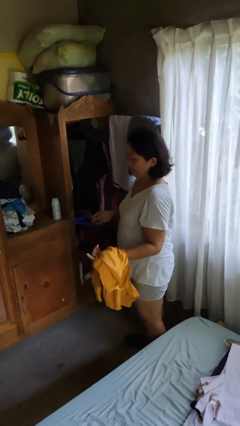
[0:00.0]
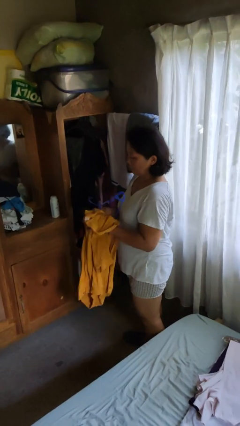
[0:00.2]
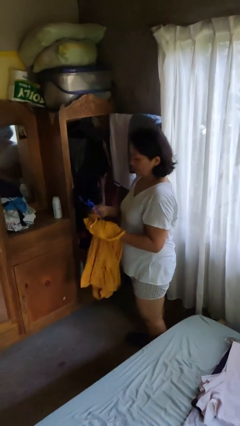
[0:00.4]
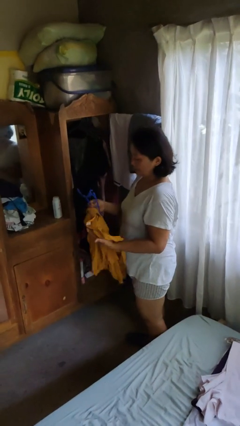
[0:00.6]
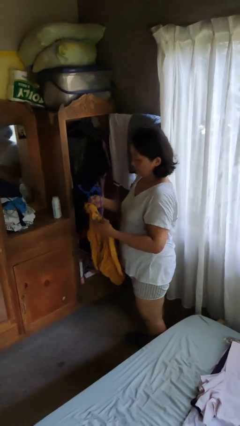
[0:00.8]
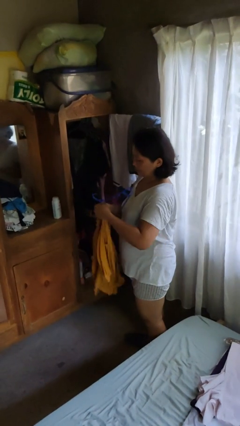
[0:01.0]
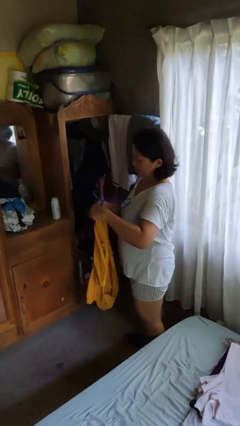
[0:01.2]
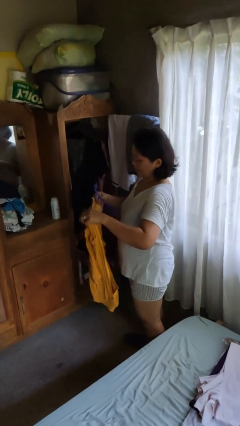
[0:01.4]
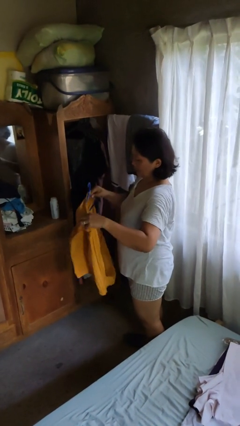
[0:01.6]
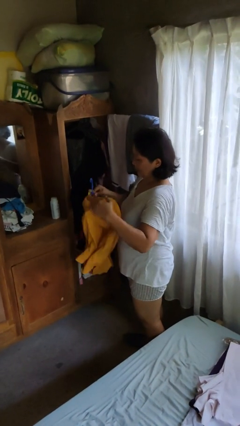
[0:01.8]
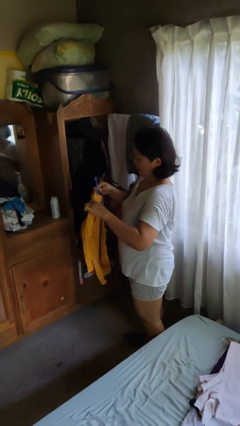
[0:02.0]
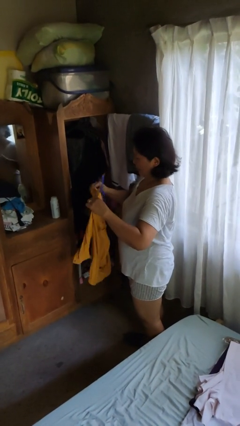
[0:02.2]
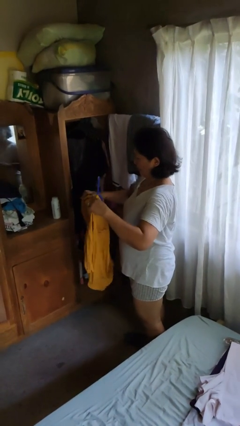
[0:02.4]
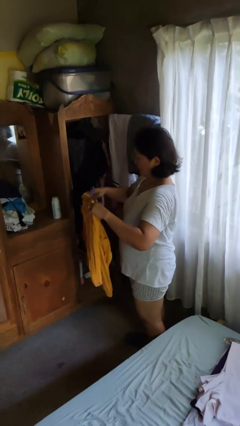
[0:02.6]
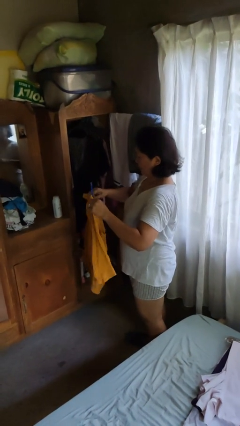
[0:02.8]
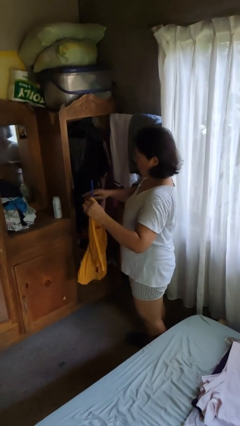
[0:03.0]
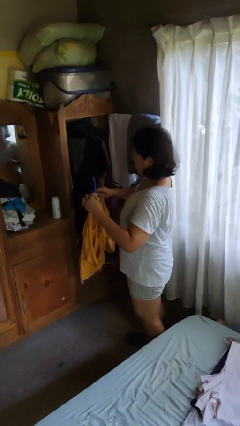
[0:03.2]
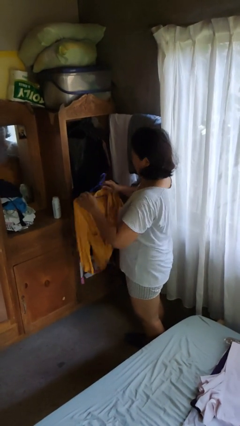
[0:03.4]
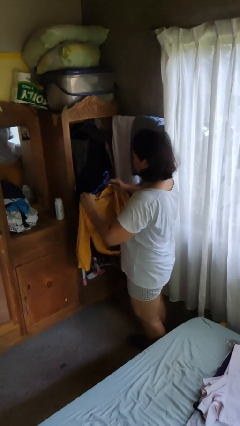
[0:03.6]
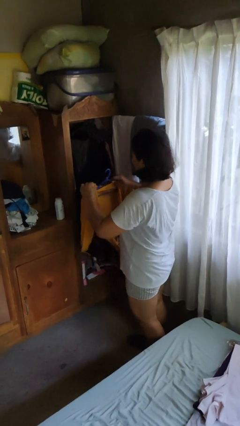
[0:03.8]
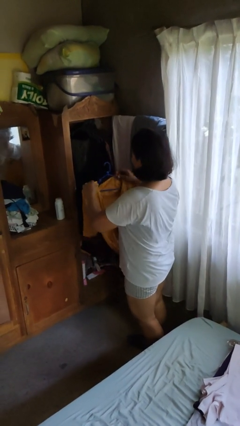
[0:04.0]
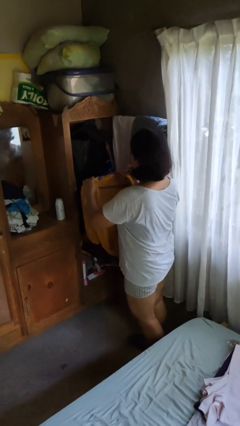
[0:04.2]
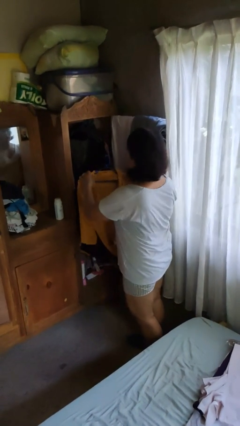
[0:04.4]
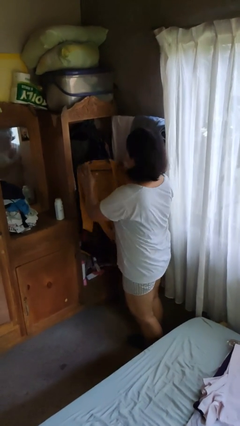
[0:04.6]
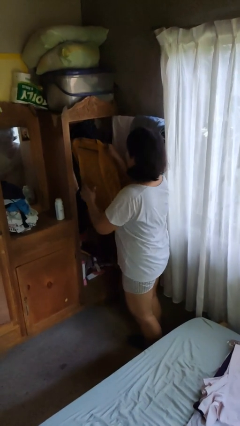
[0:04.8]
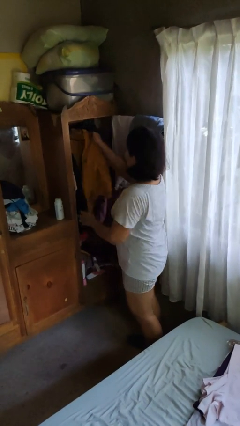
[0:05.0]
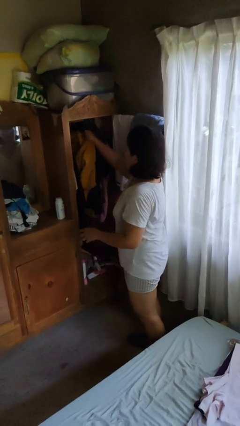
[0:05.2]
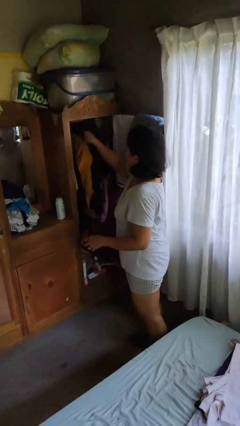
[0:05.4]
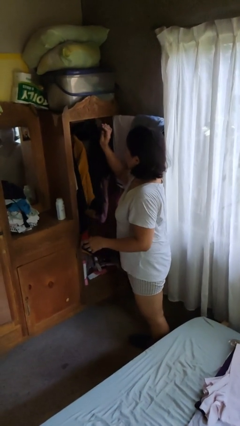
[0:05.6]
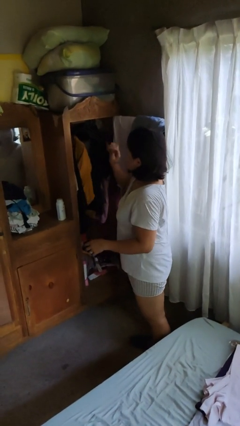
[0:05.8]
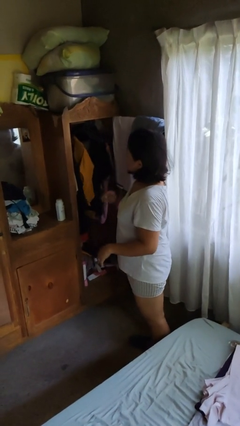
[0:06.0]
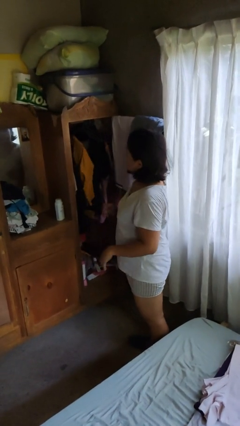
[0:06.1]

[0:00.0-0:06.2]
person puts clothes into closet

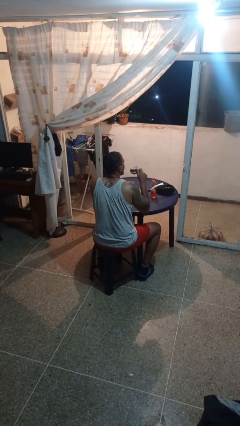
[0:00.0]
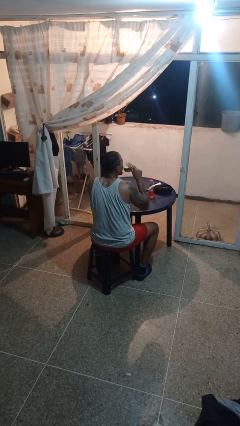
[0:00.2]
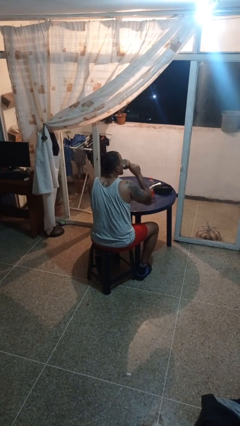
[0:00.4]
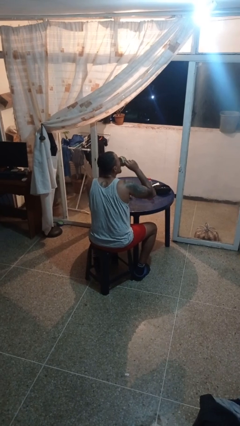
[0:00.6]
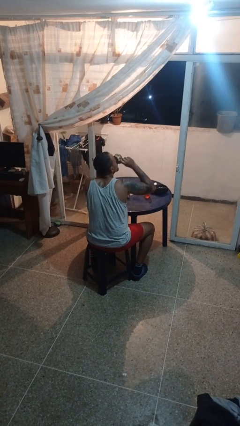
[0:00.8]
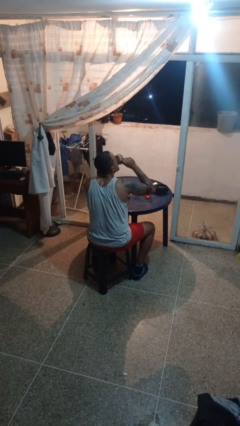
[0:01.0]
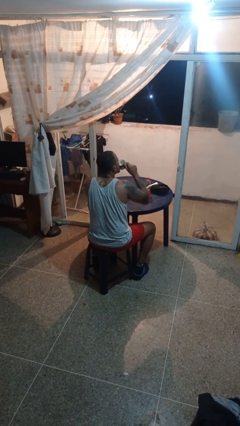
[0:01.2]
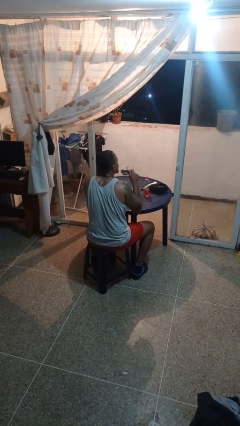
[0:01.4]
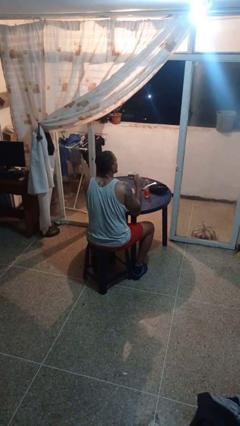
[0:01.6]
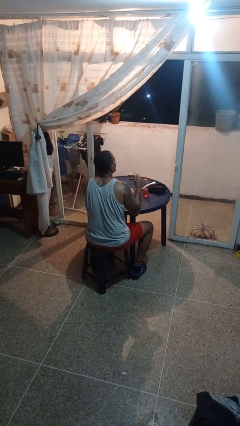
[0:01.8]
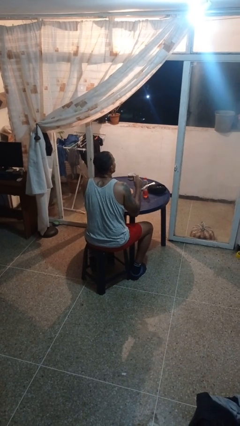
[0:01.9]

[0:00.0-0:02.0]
person drinks from mug

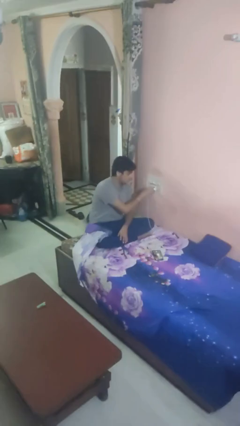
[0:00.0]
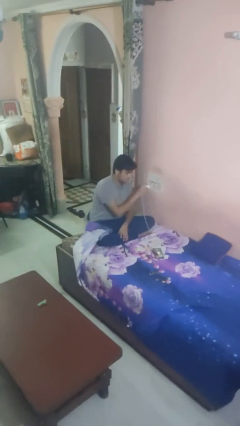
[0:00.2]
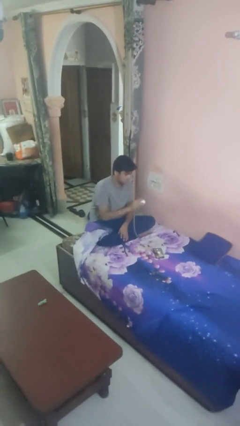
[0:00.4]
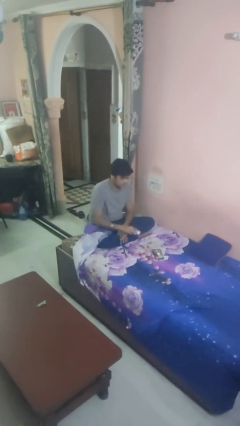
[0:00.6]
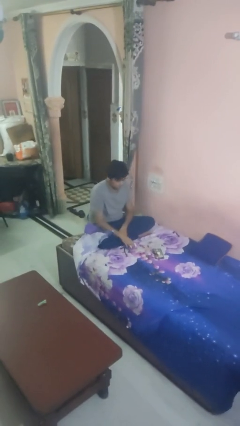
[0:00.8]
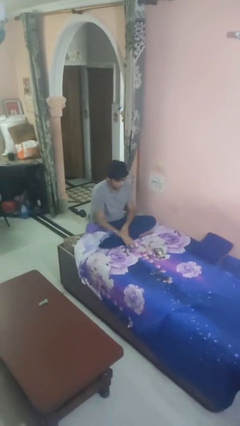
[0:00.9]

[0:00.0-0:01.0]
person unplugs from electrical socket

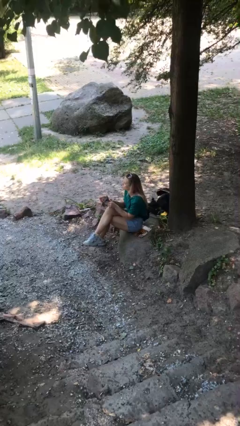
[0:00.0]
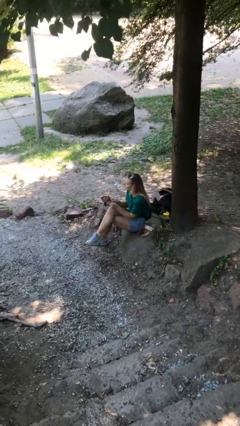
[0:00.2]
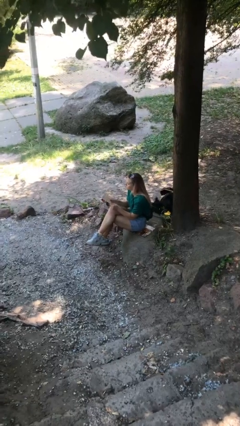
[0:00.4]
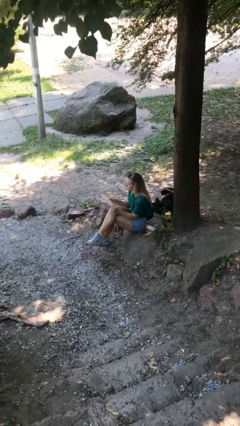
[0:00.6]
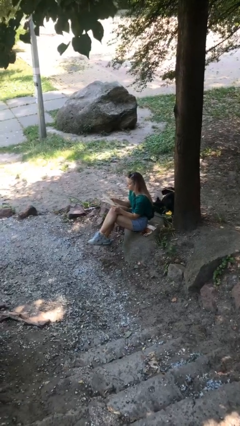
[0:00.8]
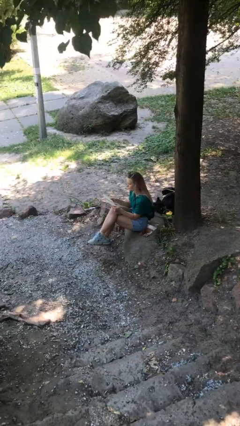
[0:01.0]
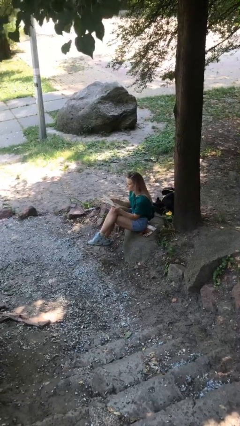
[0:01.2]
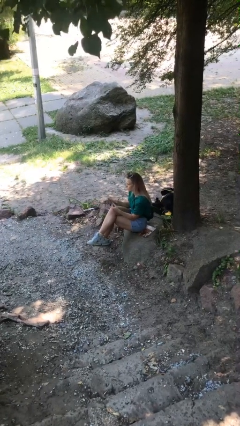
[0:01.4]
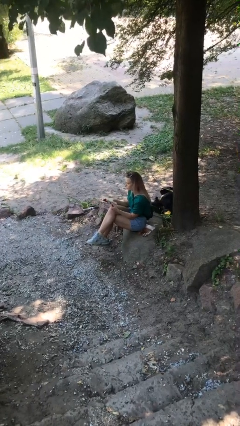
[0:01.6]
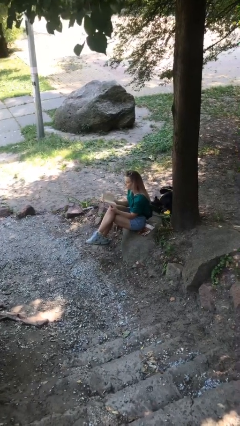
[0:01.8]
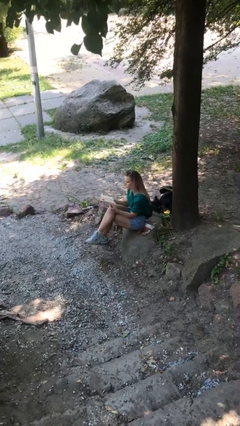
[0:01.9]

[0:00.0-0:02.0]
person reads book

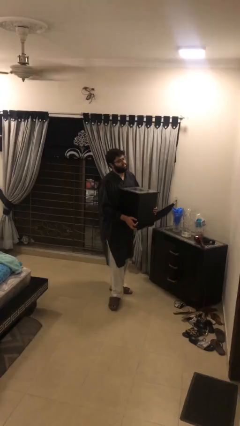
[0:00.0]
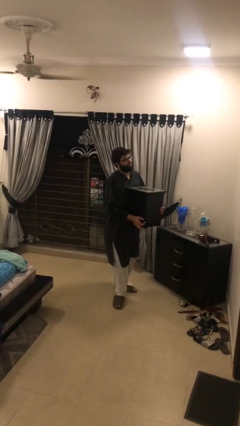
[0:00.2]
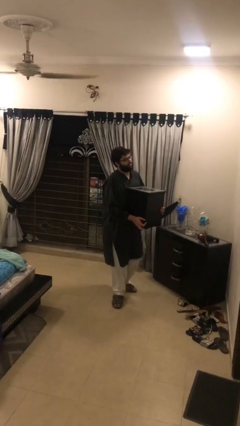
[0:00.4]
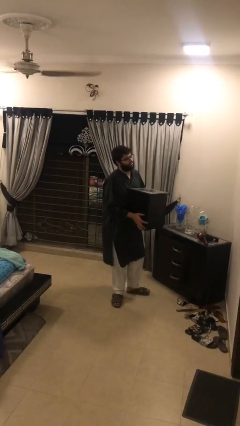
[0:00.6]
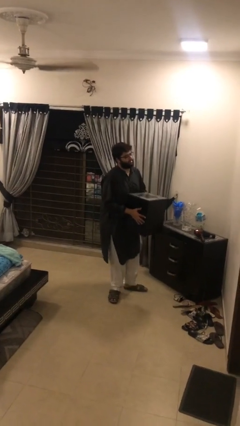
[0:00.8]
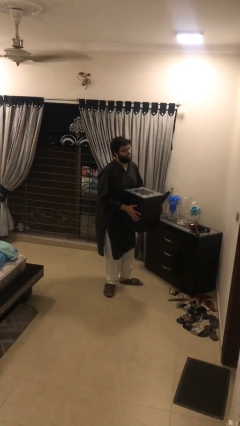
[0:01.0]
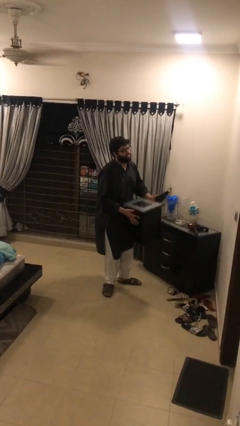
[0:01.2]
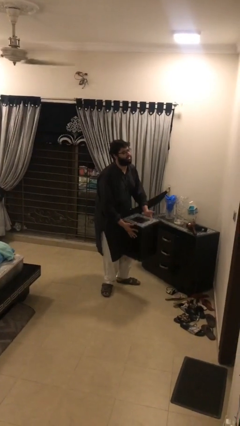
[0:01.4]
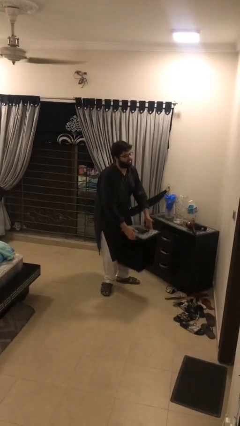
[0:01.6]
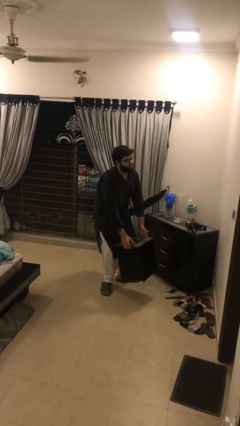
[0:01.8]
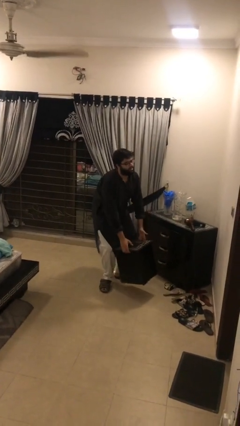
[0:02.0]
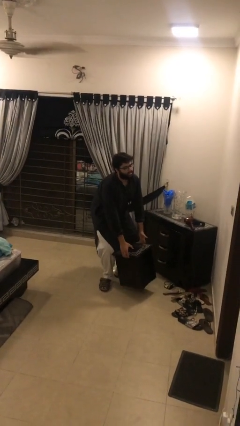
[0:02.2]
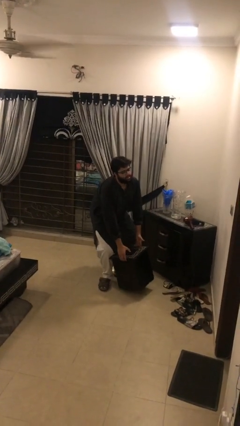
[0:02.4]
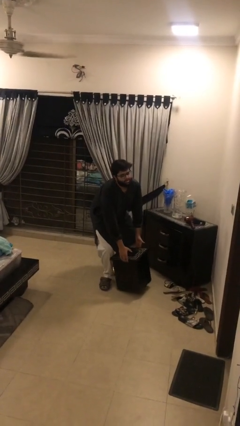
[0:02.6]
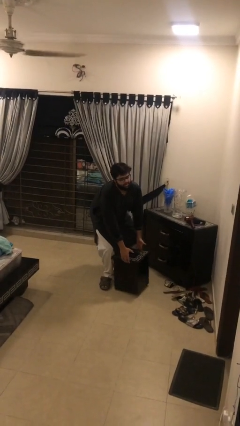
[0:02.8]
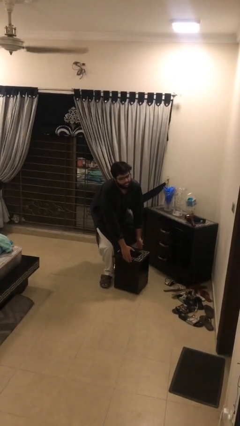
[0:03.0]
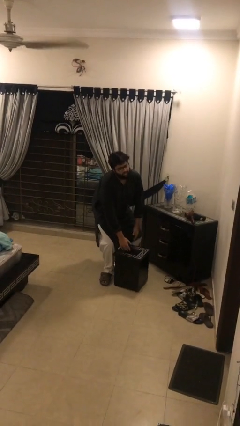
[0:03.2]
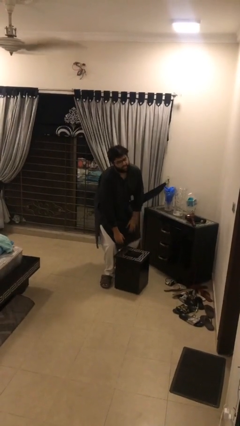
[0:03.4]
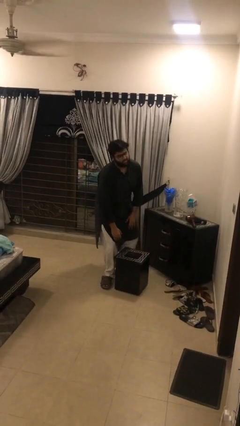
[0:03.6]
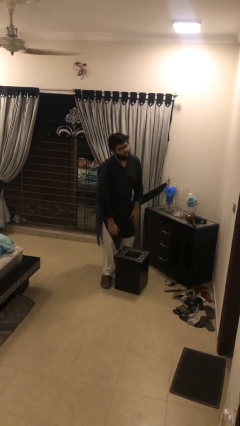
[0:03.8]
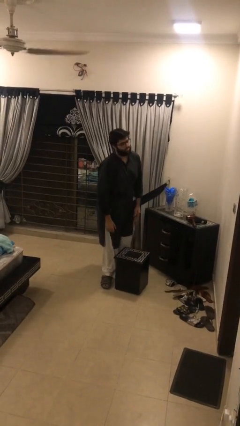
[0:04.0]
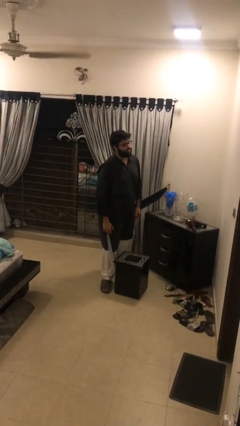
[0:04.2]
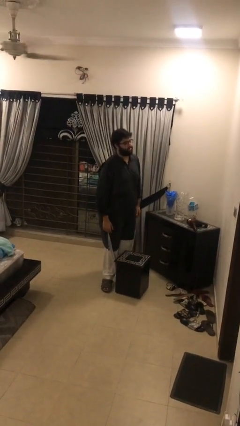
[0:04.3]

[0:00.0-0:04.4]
person puts down object on floor

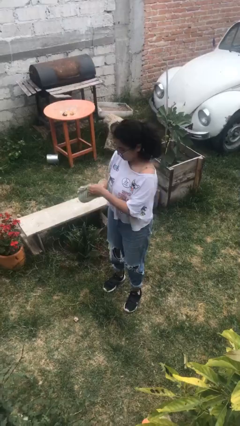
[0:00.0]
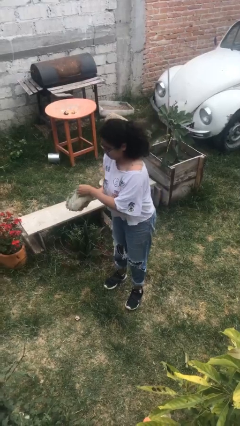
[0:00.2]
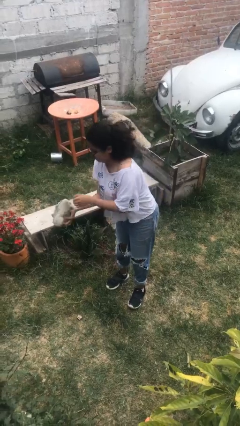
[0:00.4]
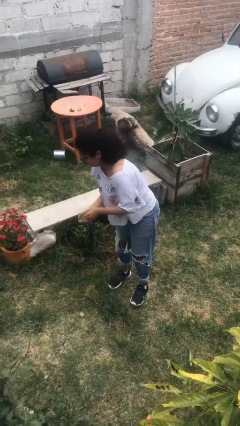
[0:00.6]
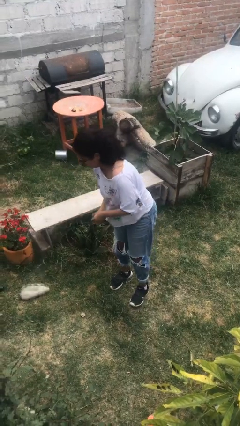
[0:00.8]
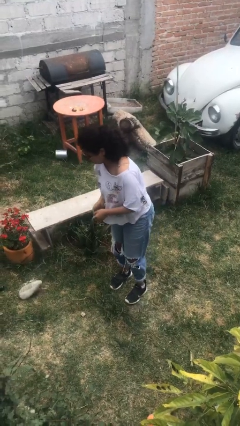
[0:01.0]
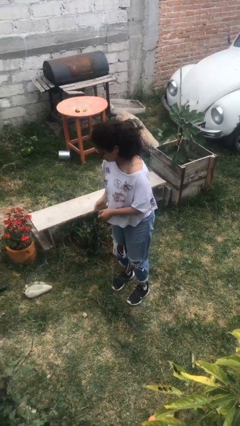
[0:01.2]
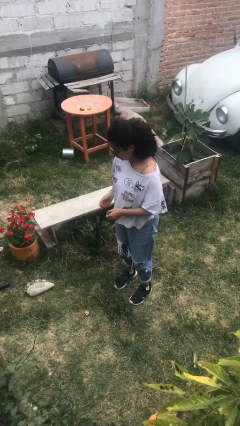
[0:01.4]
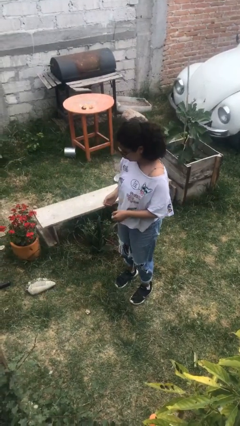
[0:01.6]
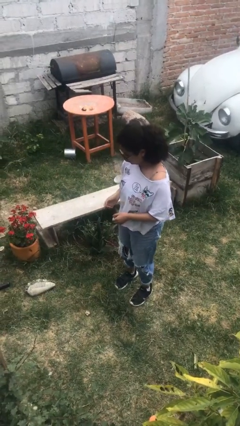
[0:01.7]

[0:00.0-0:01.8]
person drops object

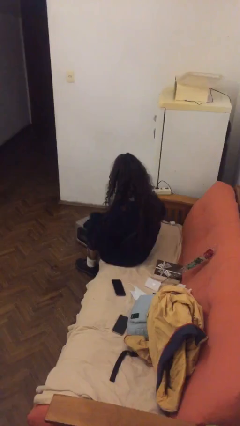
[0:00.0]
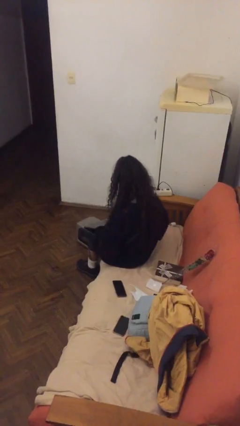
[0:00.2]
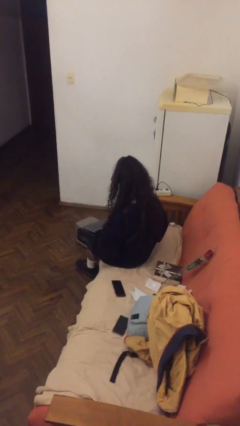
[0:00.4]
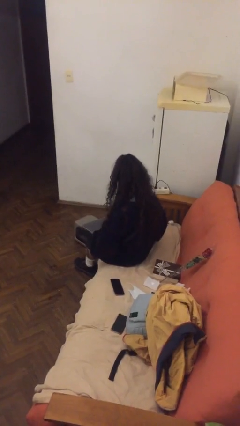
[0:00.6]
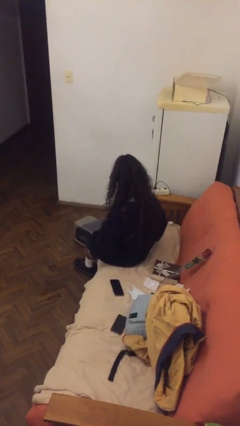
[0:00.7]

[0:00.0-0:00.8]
person closes laptop
